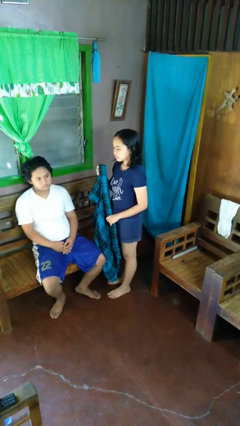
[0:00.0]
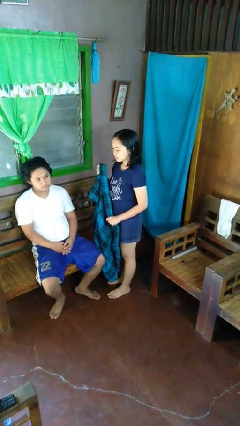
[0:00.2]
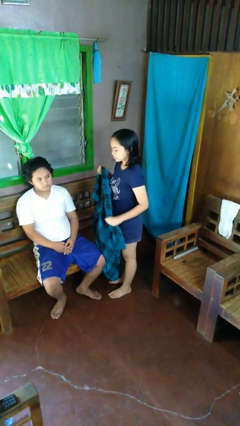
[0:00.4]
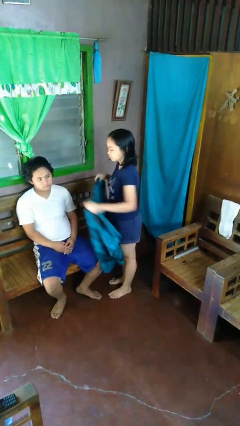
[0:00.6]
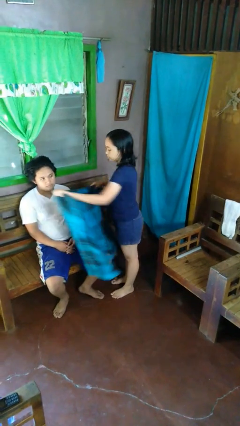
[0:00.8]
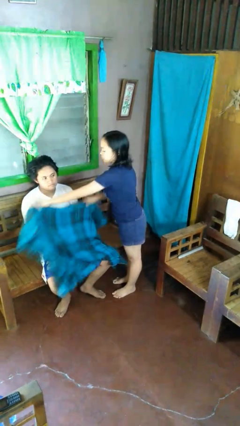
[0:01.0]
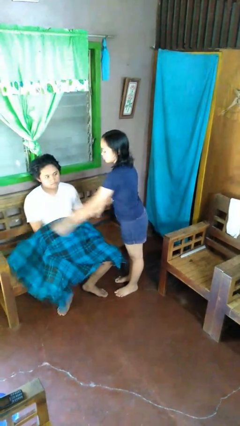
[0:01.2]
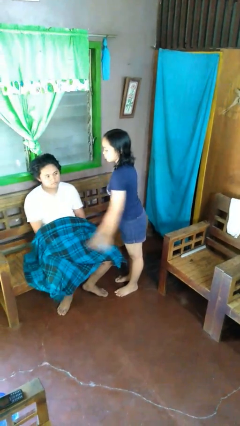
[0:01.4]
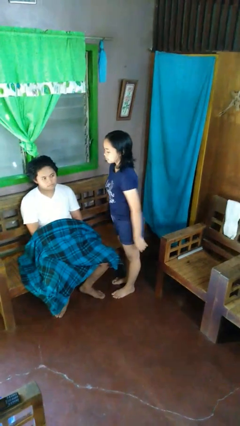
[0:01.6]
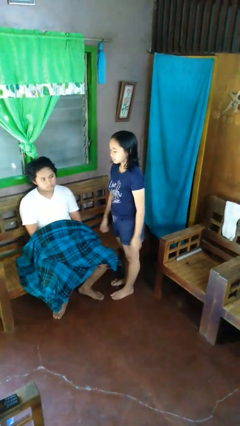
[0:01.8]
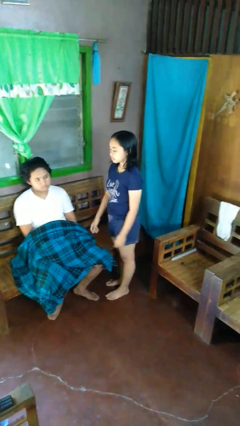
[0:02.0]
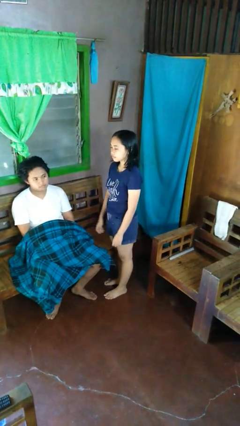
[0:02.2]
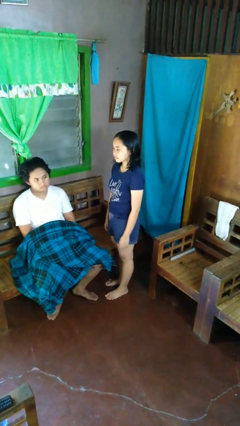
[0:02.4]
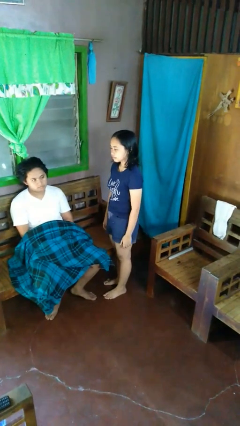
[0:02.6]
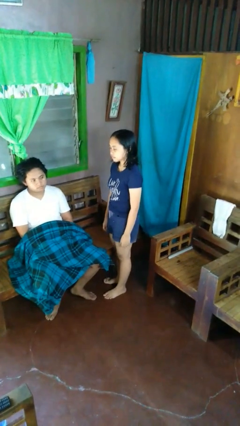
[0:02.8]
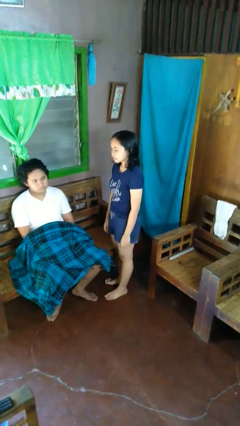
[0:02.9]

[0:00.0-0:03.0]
person covers friend with blanket

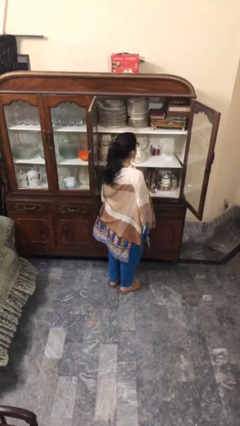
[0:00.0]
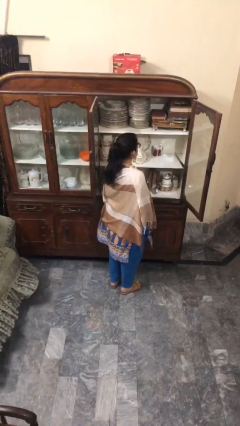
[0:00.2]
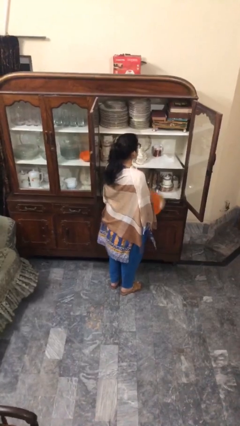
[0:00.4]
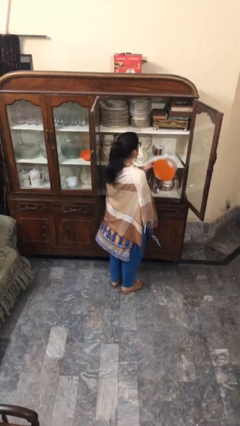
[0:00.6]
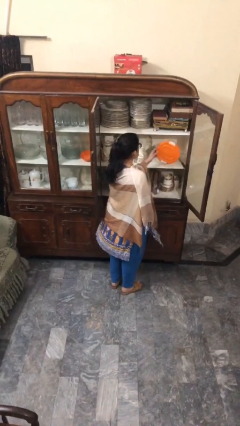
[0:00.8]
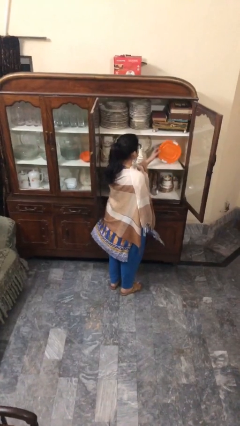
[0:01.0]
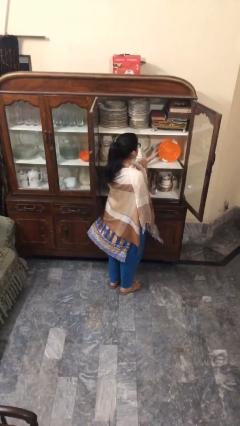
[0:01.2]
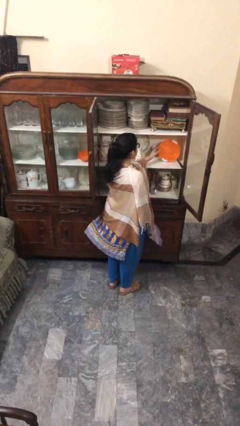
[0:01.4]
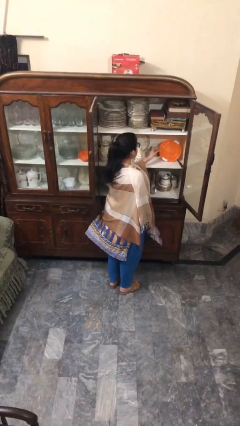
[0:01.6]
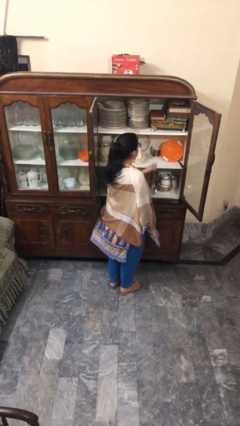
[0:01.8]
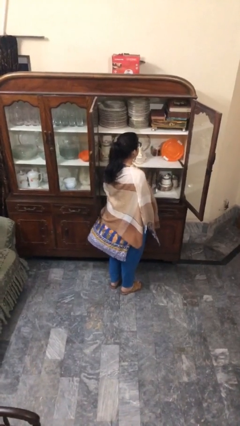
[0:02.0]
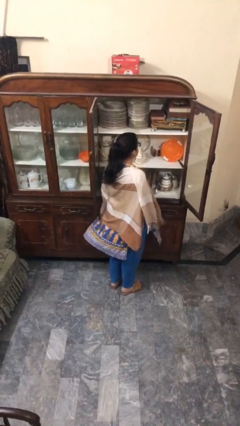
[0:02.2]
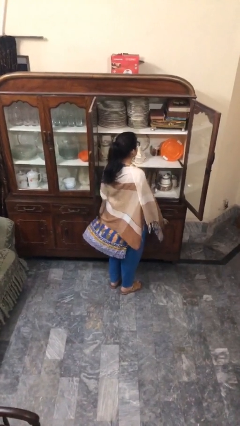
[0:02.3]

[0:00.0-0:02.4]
person puts object in cabinet

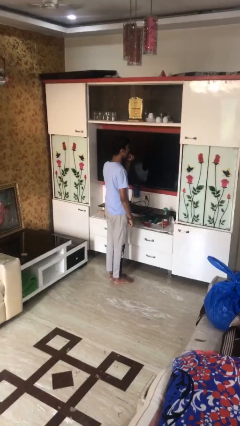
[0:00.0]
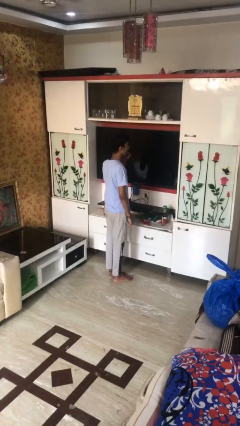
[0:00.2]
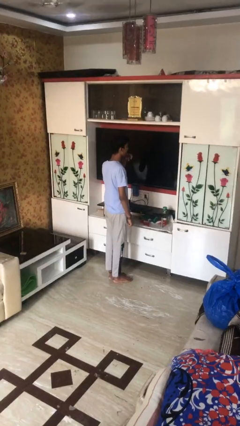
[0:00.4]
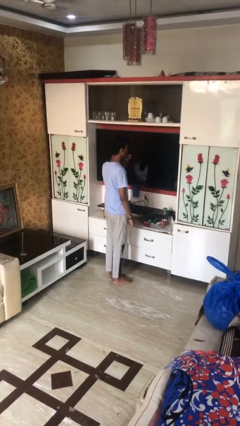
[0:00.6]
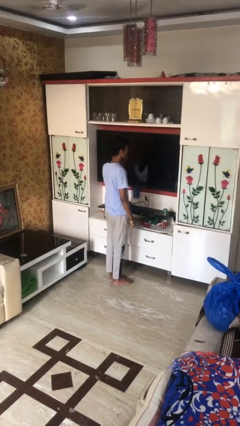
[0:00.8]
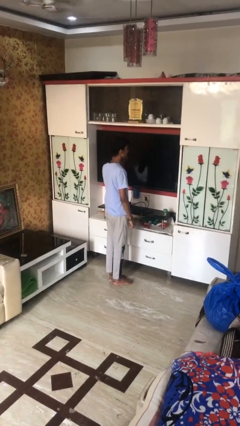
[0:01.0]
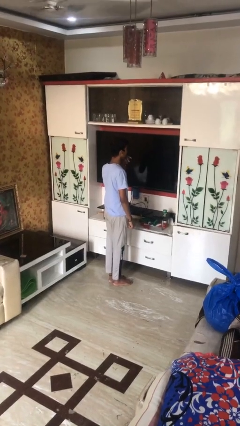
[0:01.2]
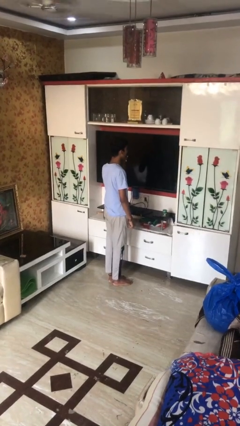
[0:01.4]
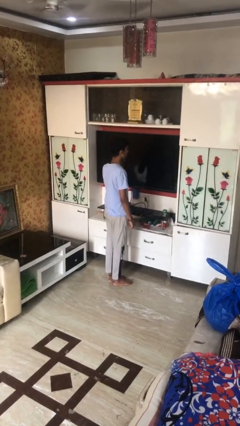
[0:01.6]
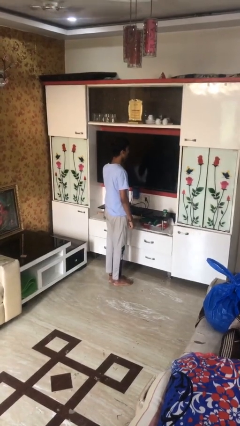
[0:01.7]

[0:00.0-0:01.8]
person licks fingers

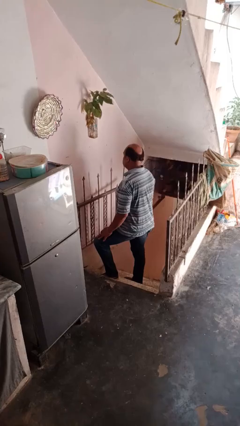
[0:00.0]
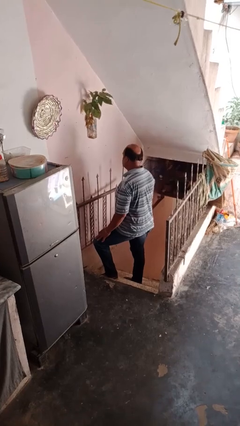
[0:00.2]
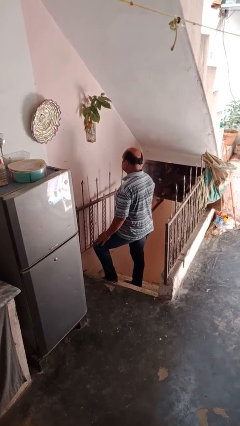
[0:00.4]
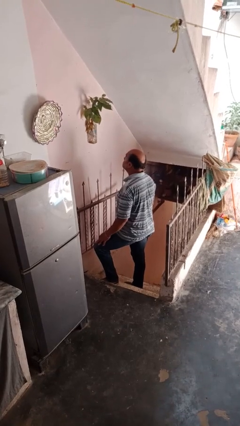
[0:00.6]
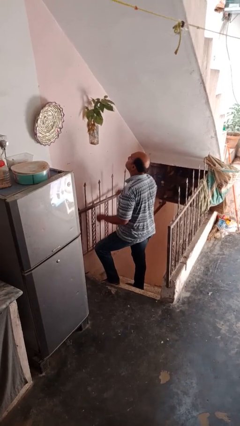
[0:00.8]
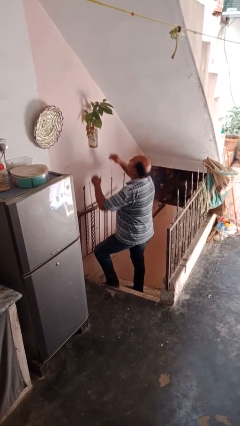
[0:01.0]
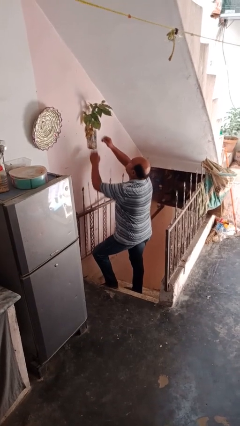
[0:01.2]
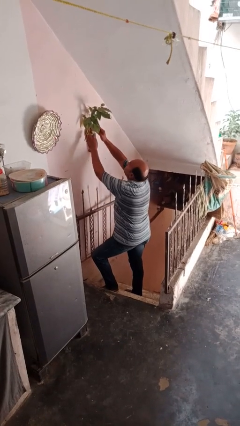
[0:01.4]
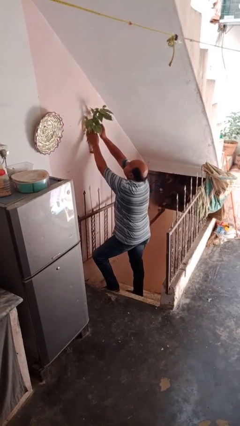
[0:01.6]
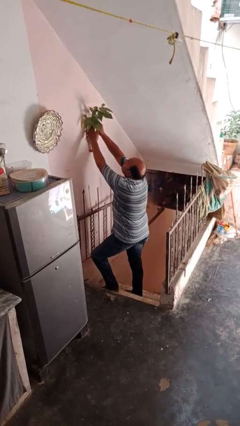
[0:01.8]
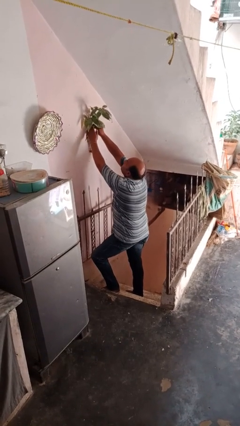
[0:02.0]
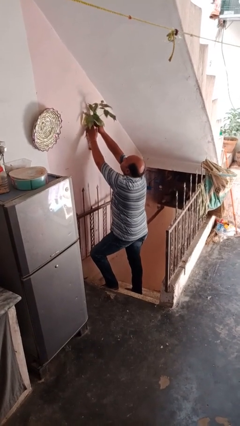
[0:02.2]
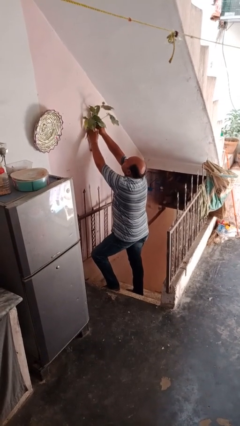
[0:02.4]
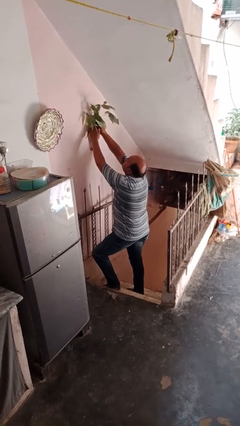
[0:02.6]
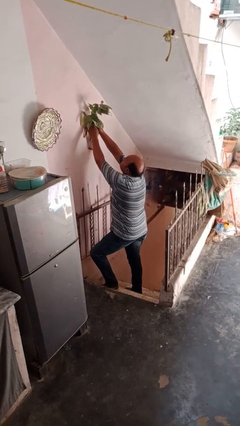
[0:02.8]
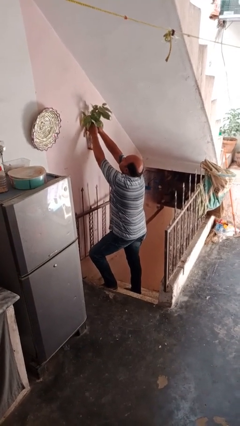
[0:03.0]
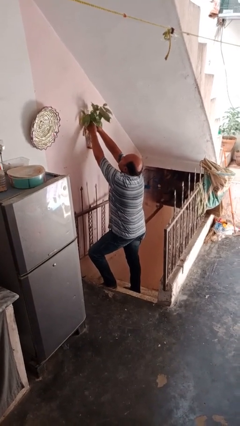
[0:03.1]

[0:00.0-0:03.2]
person bumps into table

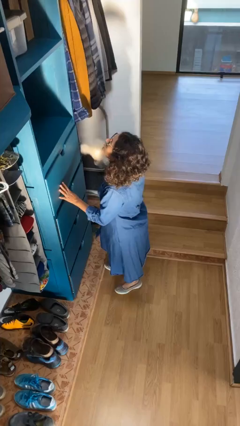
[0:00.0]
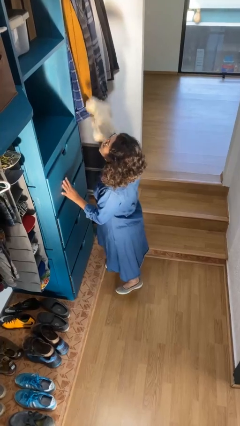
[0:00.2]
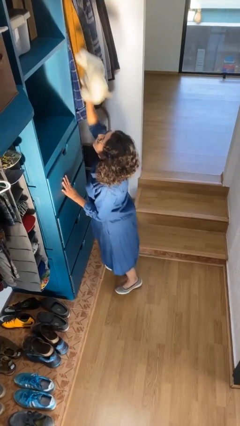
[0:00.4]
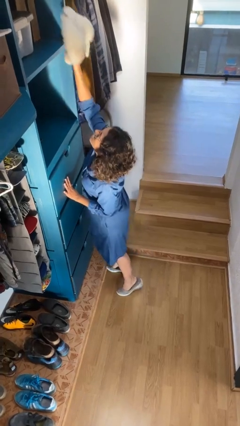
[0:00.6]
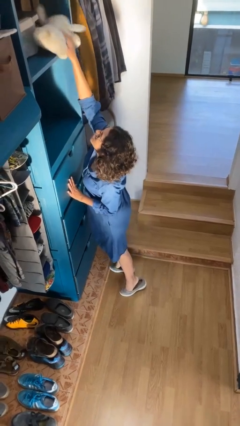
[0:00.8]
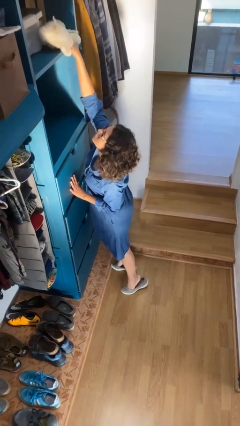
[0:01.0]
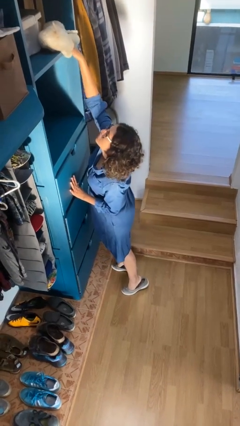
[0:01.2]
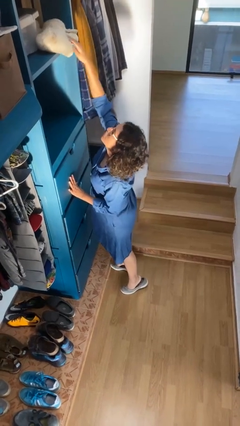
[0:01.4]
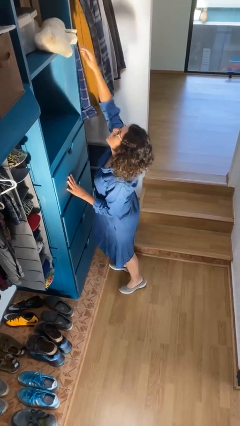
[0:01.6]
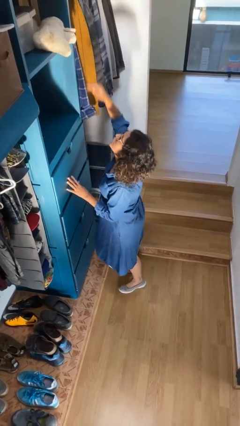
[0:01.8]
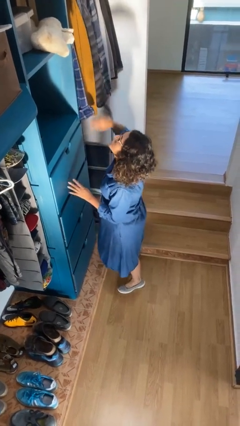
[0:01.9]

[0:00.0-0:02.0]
person puts down object on shelf

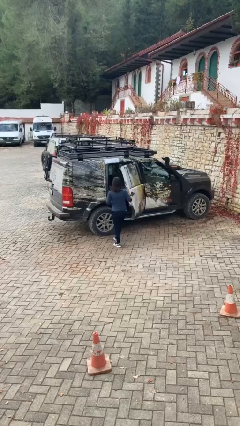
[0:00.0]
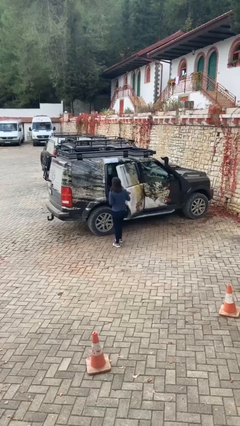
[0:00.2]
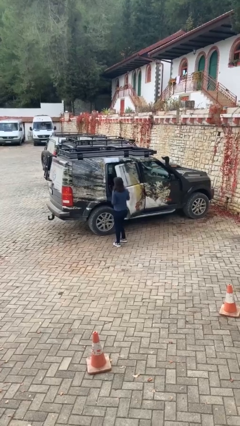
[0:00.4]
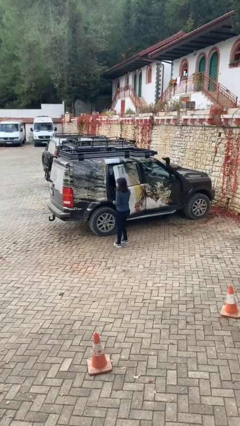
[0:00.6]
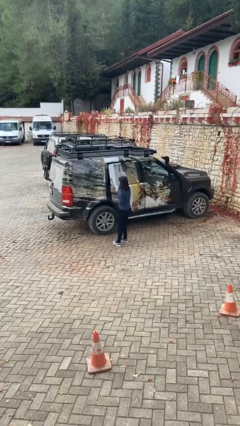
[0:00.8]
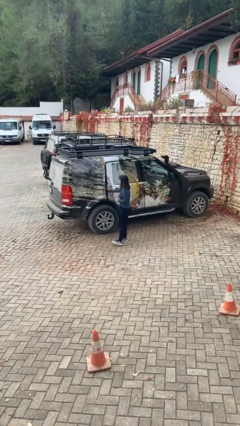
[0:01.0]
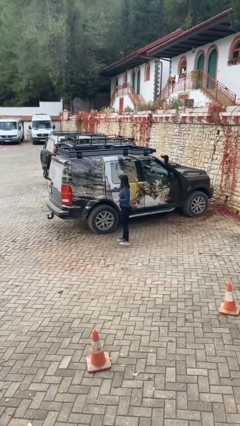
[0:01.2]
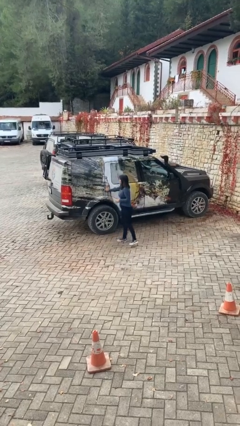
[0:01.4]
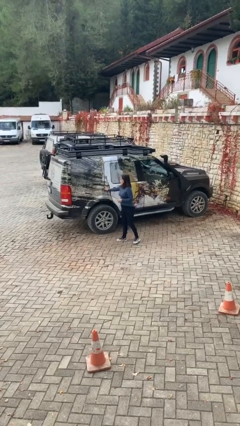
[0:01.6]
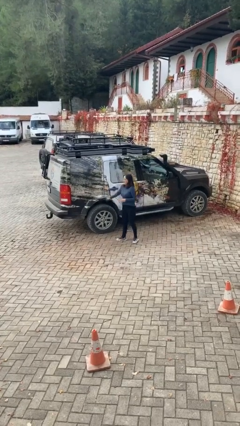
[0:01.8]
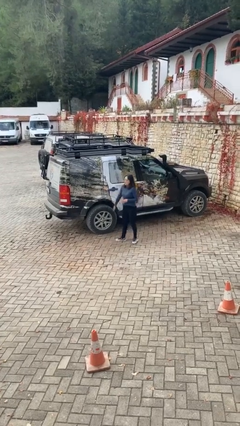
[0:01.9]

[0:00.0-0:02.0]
person closes car door

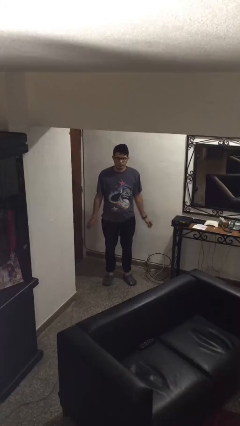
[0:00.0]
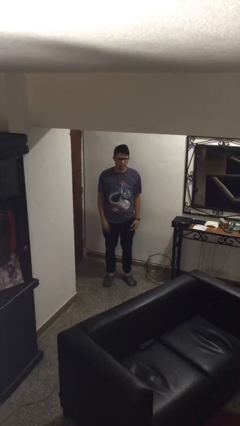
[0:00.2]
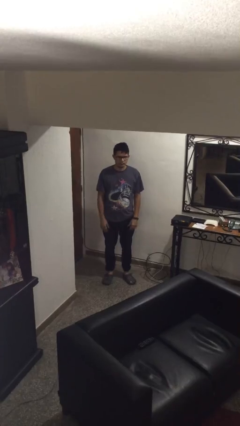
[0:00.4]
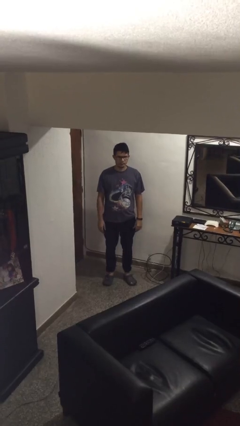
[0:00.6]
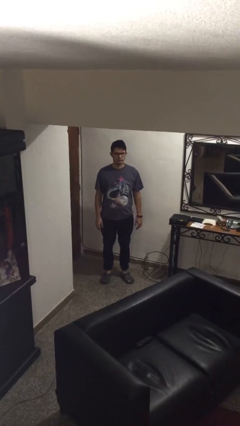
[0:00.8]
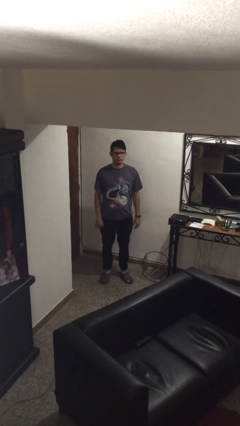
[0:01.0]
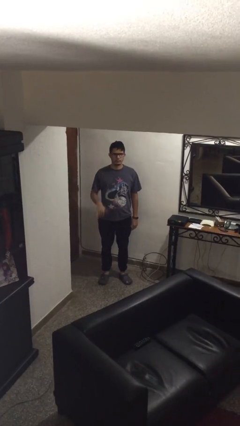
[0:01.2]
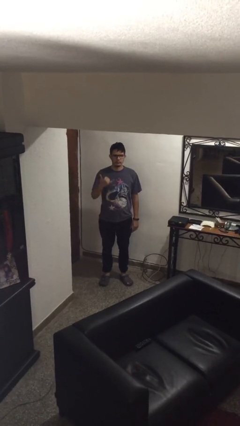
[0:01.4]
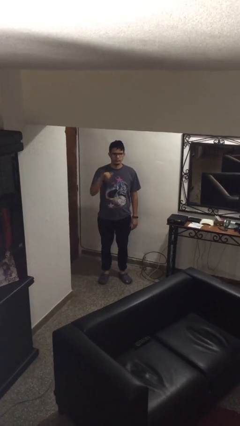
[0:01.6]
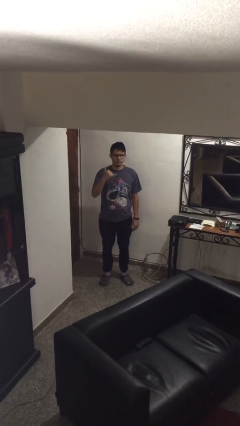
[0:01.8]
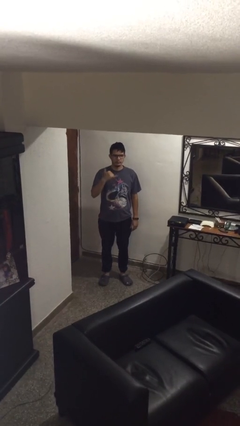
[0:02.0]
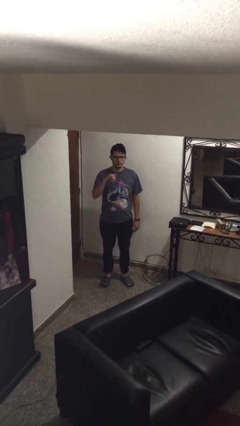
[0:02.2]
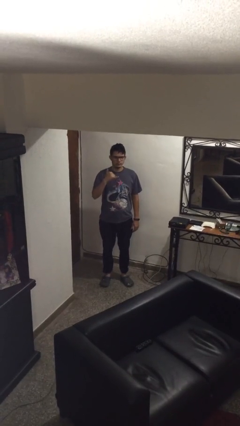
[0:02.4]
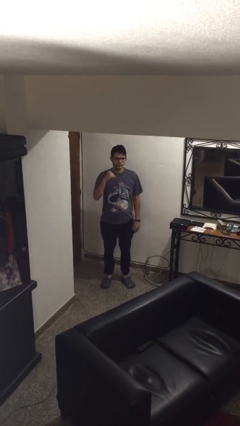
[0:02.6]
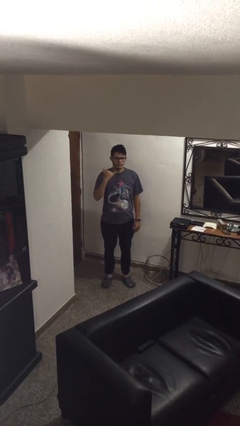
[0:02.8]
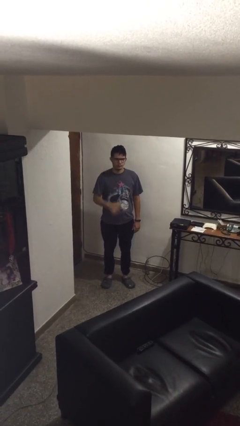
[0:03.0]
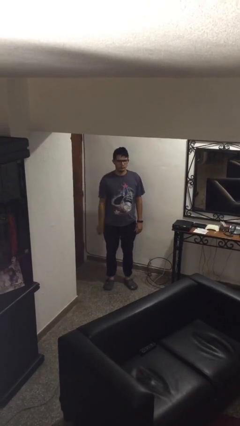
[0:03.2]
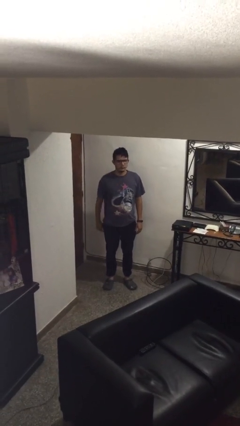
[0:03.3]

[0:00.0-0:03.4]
person gestures hang loose
